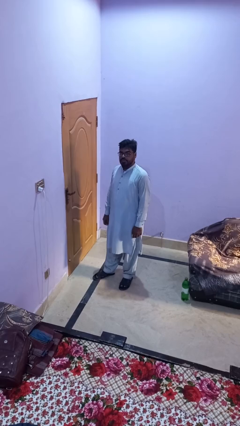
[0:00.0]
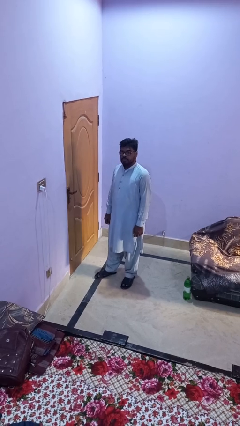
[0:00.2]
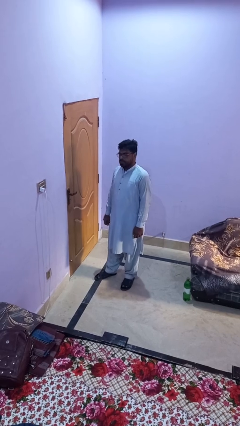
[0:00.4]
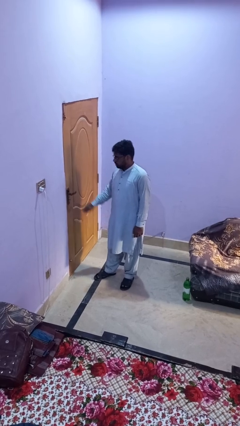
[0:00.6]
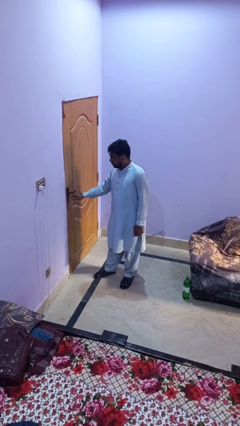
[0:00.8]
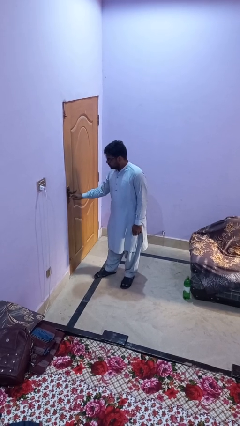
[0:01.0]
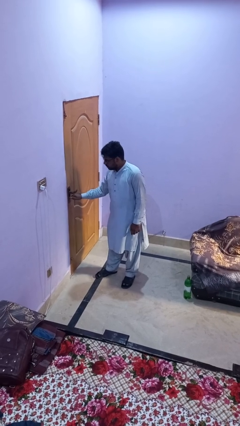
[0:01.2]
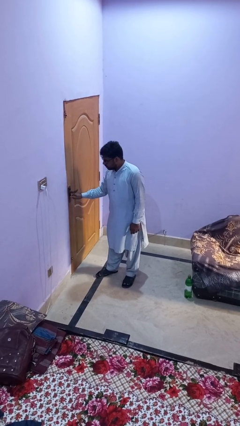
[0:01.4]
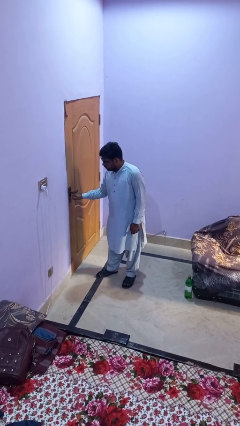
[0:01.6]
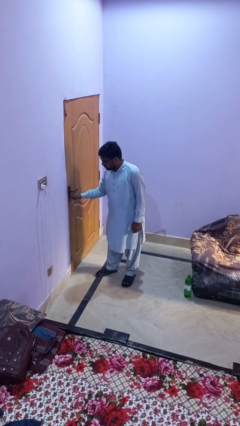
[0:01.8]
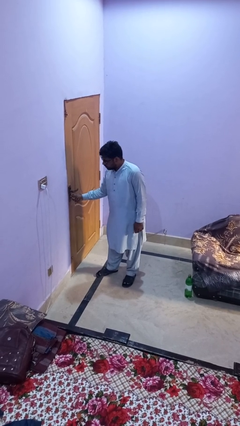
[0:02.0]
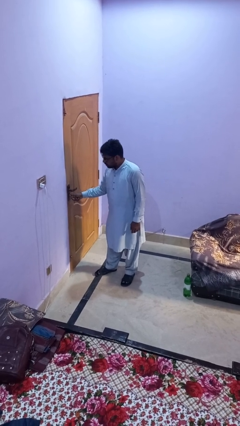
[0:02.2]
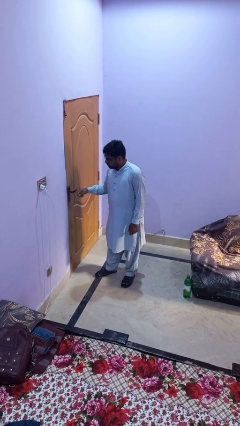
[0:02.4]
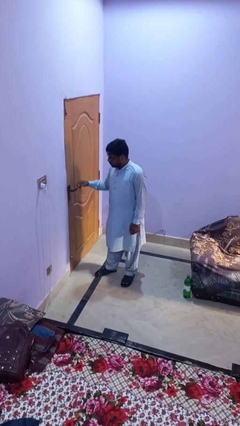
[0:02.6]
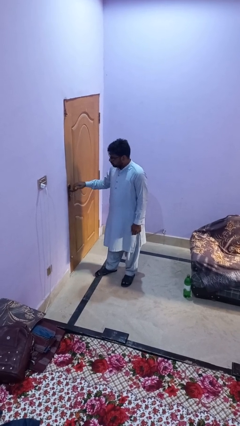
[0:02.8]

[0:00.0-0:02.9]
person unlocks door with keys

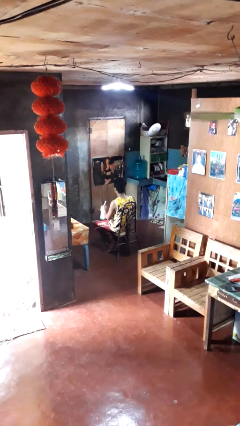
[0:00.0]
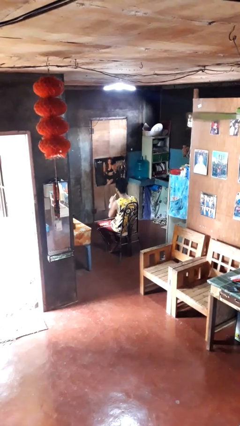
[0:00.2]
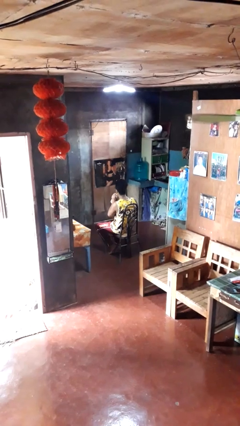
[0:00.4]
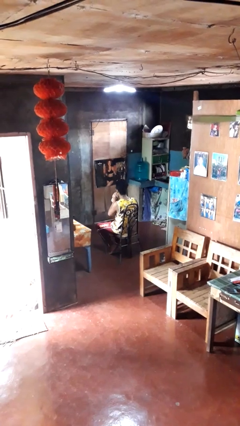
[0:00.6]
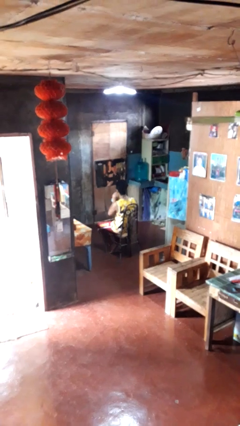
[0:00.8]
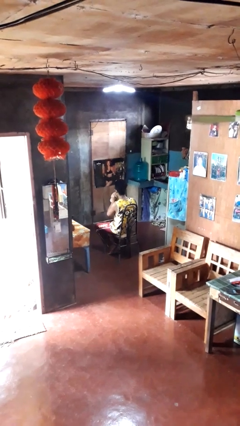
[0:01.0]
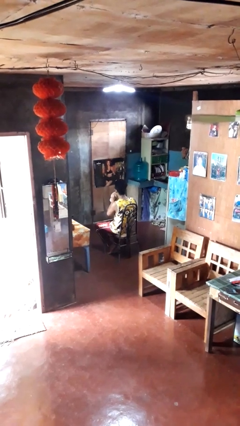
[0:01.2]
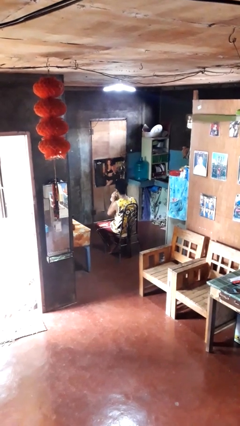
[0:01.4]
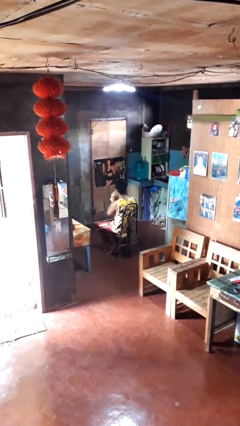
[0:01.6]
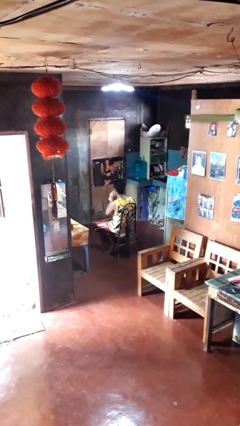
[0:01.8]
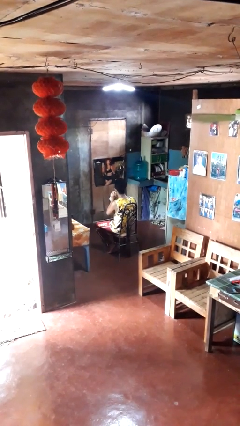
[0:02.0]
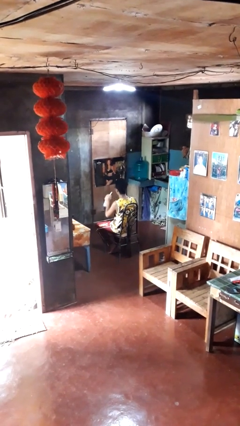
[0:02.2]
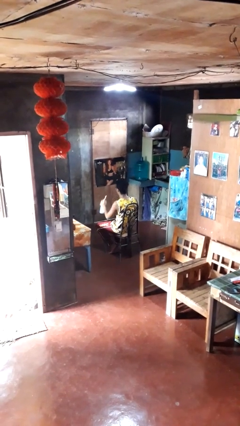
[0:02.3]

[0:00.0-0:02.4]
person drinks from straw

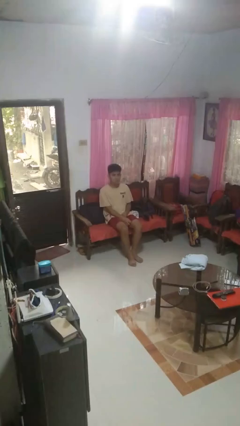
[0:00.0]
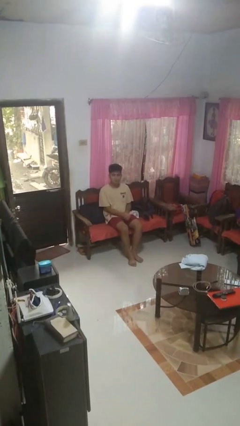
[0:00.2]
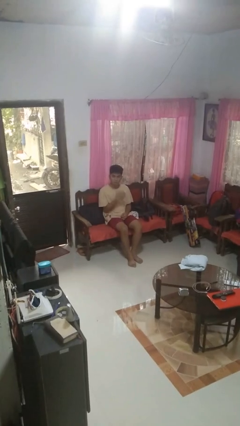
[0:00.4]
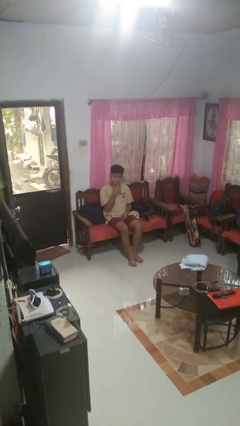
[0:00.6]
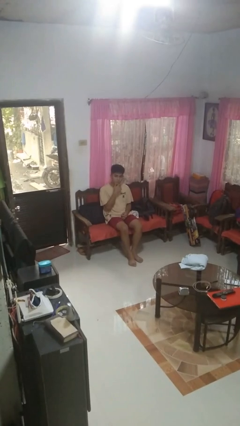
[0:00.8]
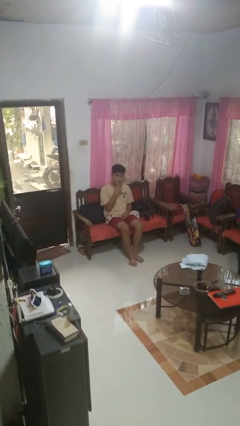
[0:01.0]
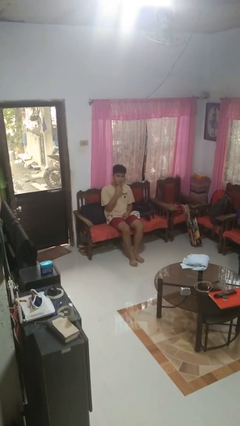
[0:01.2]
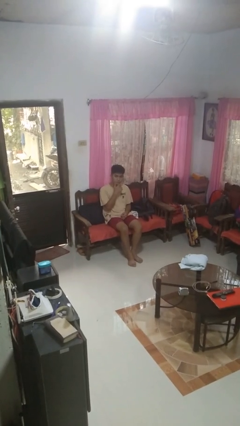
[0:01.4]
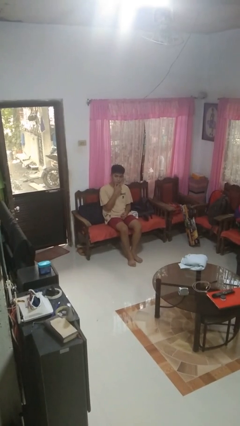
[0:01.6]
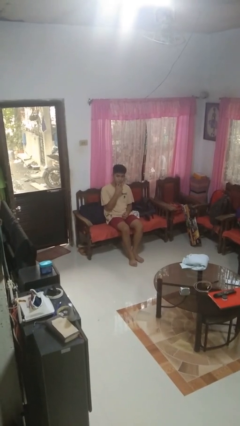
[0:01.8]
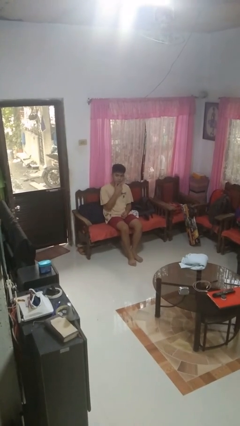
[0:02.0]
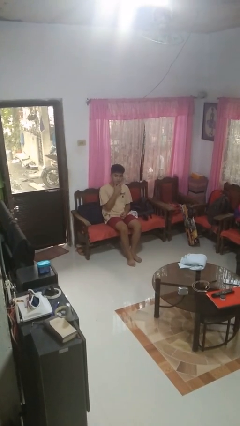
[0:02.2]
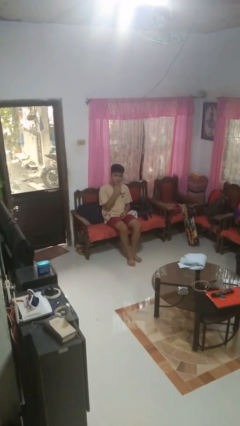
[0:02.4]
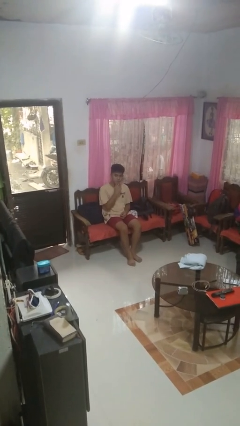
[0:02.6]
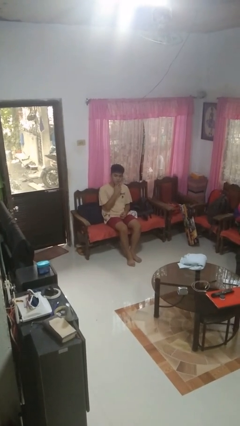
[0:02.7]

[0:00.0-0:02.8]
person strokes chin

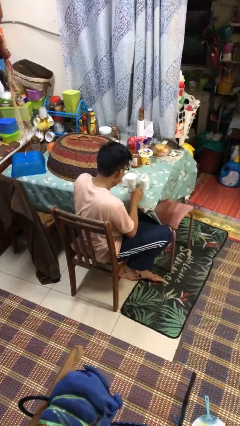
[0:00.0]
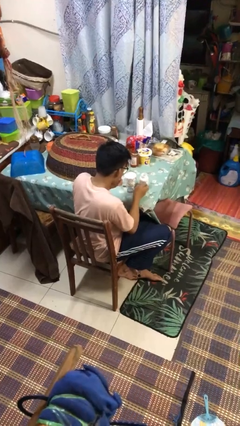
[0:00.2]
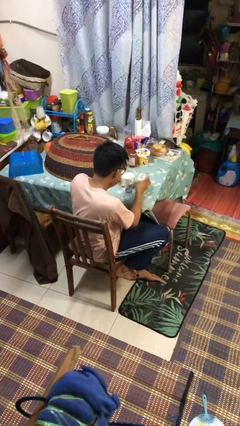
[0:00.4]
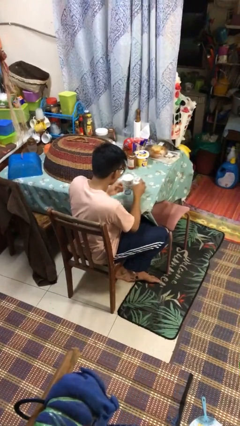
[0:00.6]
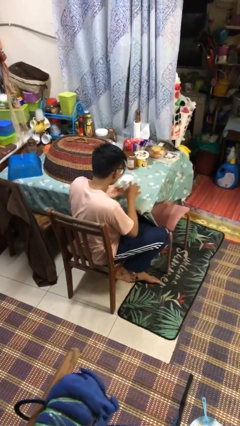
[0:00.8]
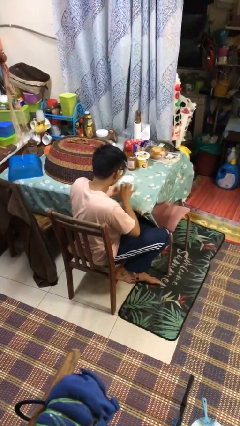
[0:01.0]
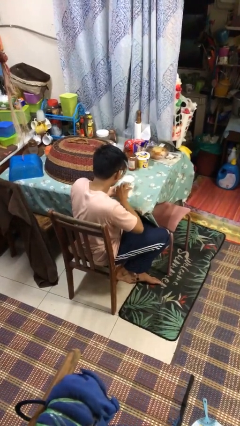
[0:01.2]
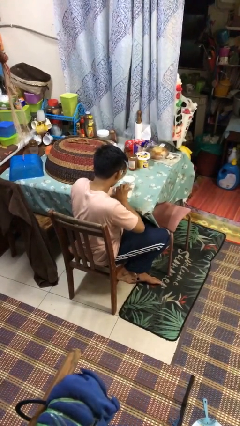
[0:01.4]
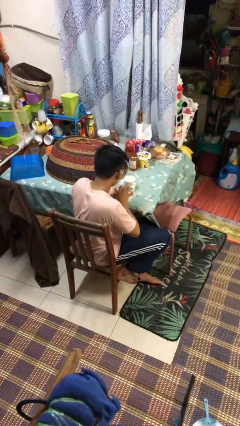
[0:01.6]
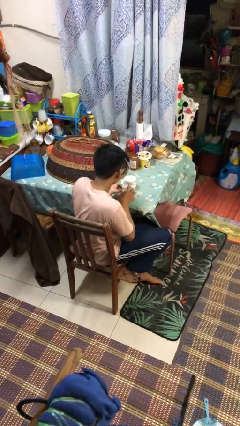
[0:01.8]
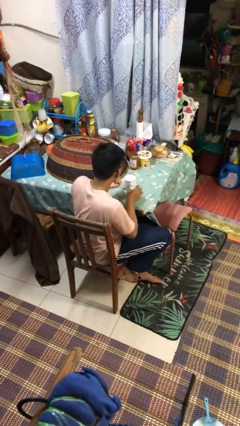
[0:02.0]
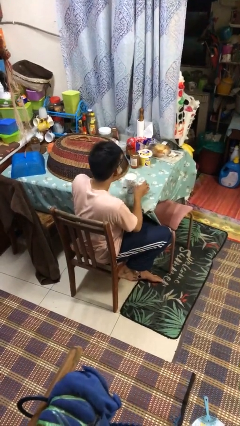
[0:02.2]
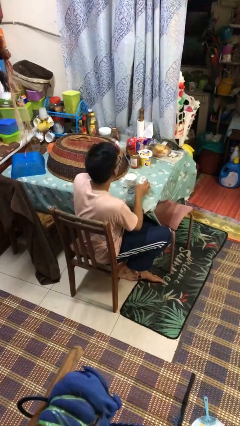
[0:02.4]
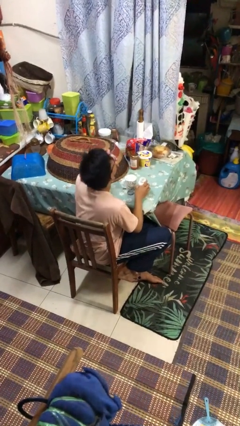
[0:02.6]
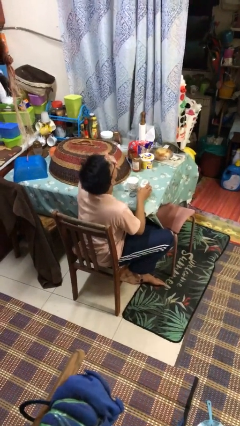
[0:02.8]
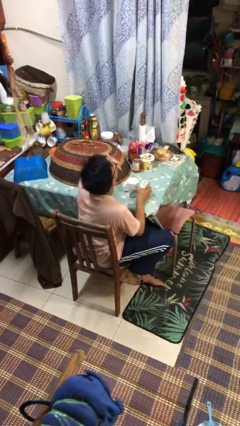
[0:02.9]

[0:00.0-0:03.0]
person takes medicine pills

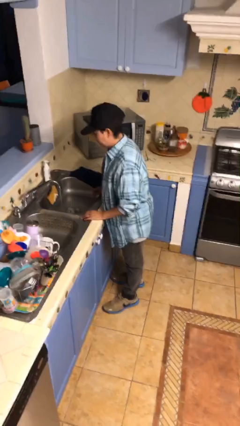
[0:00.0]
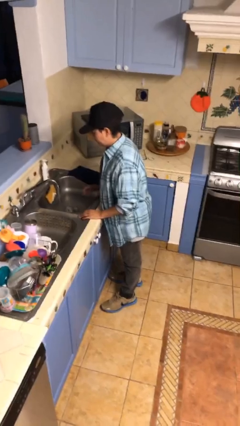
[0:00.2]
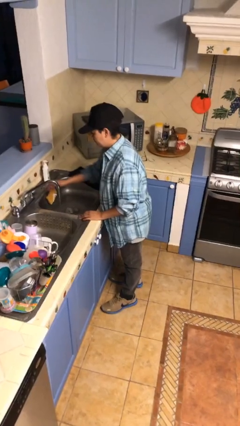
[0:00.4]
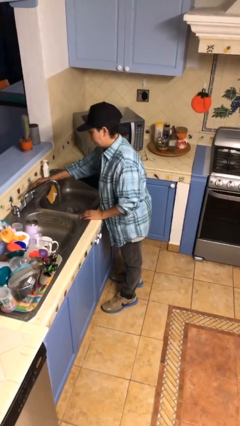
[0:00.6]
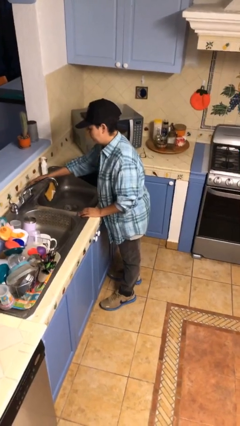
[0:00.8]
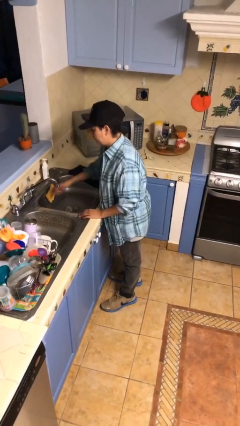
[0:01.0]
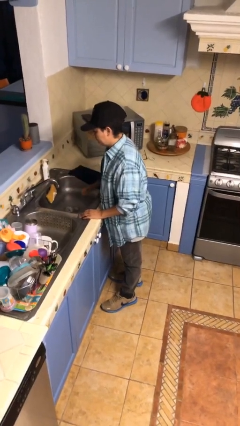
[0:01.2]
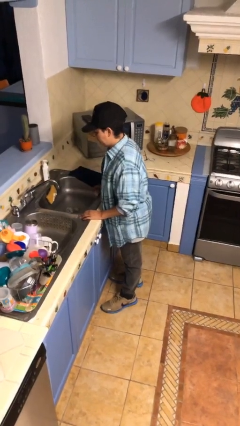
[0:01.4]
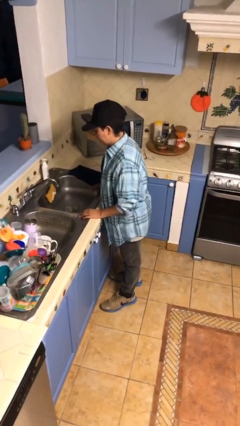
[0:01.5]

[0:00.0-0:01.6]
person turns off faucet

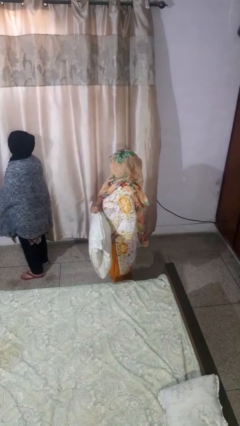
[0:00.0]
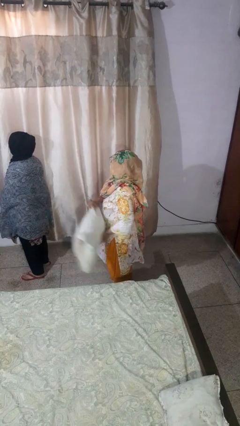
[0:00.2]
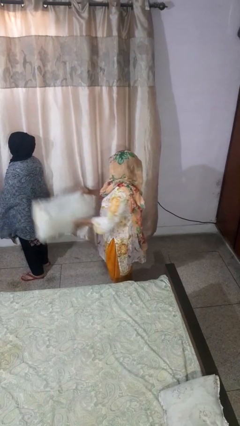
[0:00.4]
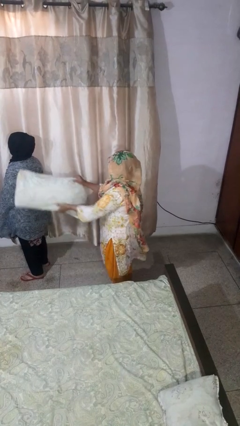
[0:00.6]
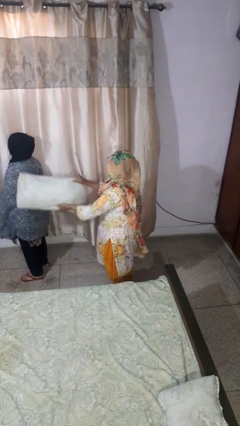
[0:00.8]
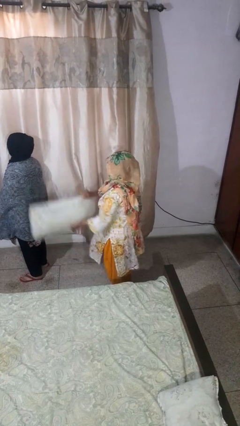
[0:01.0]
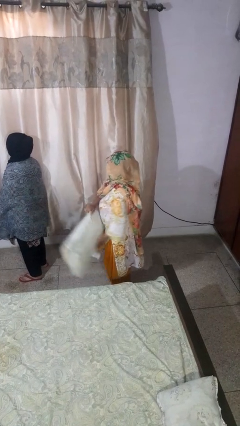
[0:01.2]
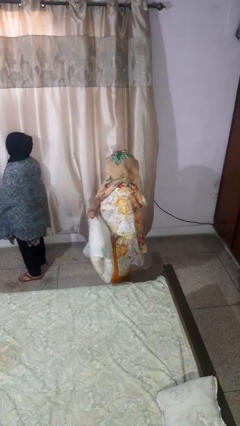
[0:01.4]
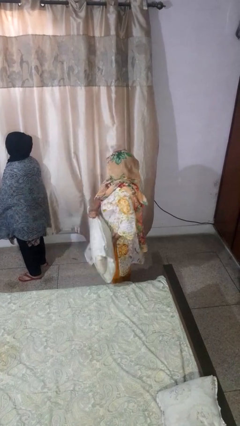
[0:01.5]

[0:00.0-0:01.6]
person hits person with pillow

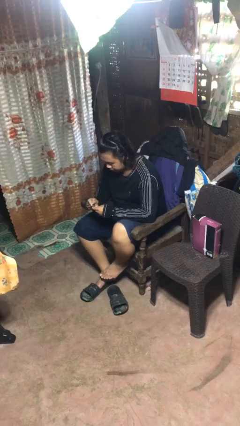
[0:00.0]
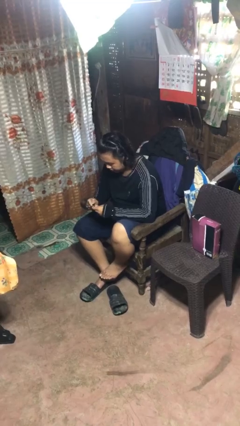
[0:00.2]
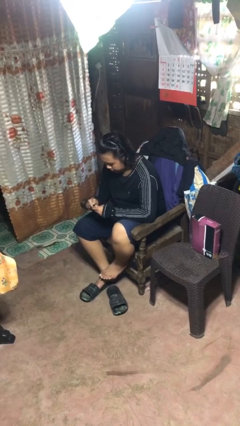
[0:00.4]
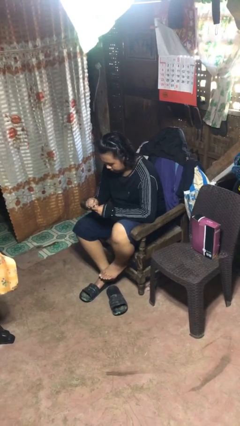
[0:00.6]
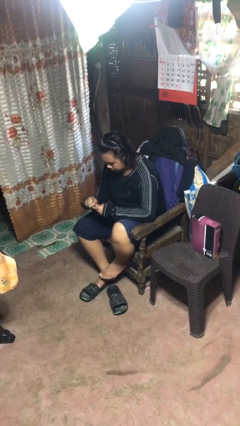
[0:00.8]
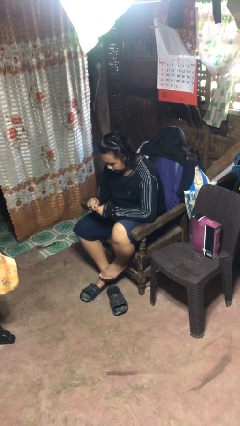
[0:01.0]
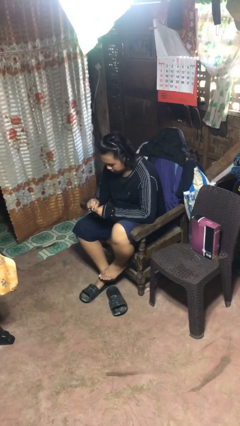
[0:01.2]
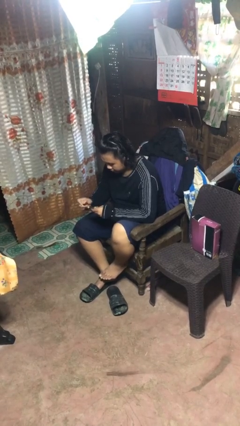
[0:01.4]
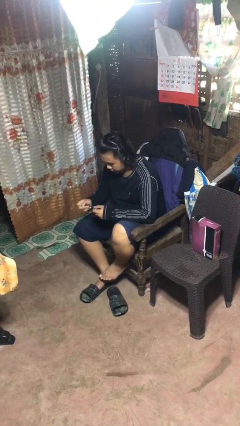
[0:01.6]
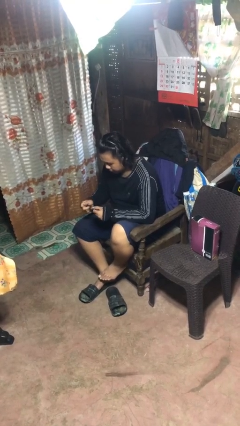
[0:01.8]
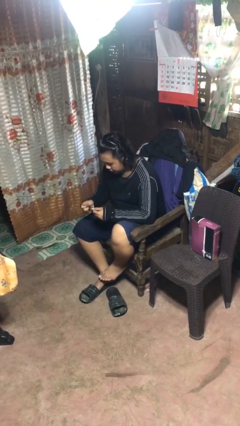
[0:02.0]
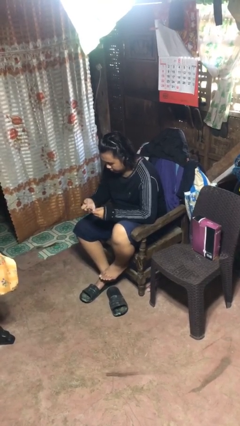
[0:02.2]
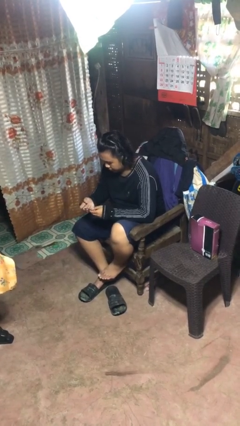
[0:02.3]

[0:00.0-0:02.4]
person files fingernails
